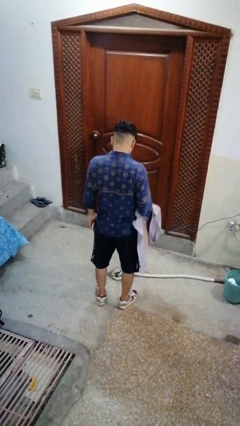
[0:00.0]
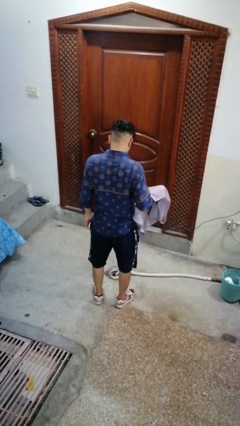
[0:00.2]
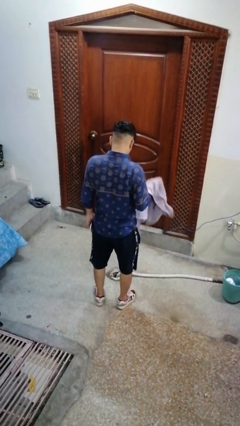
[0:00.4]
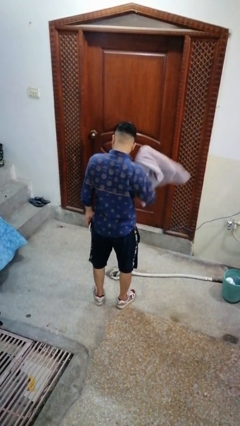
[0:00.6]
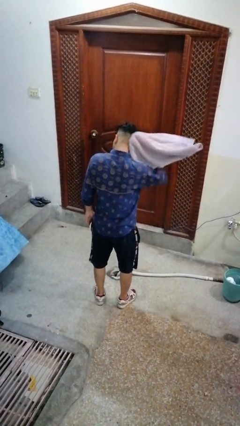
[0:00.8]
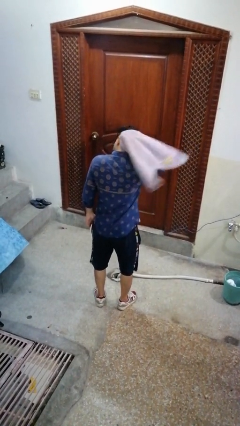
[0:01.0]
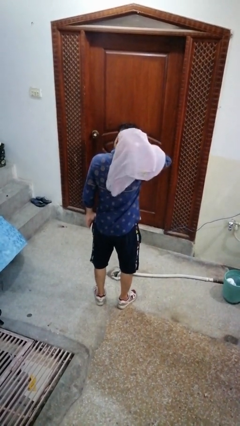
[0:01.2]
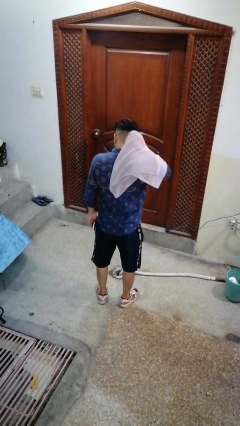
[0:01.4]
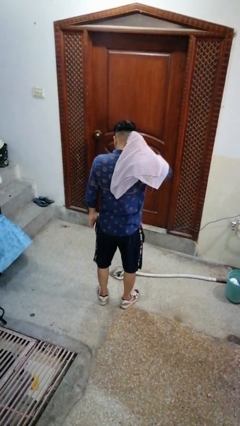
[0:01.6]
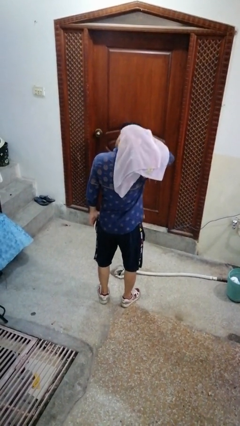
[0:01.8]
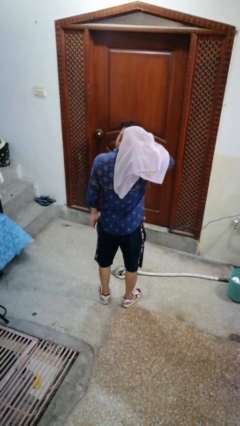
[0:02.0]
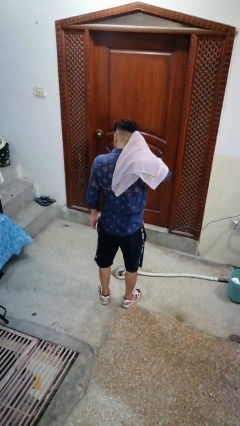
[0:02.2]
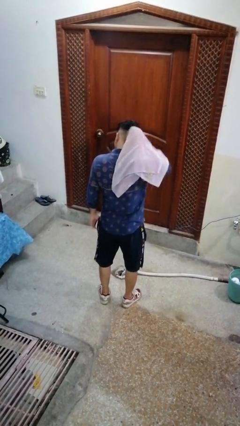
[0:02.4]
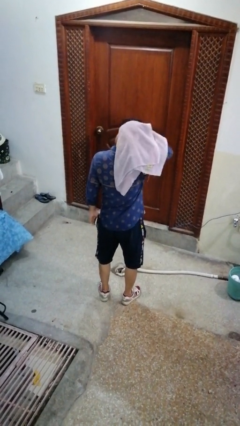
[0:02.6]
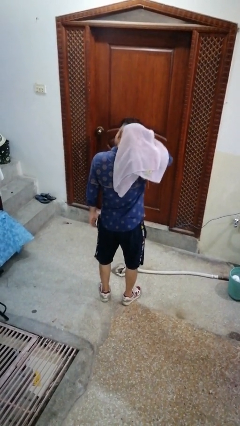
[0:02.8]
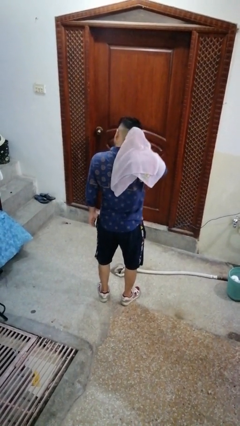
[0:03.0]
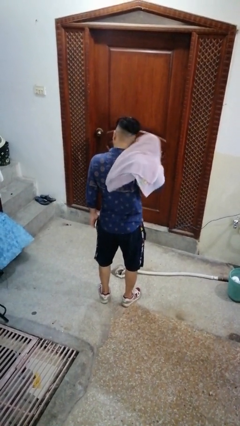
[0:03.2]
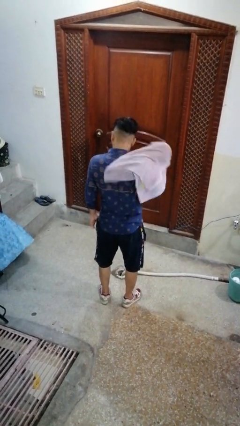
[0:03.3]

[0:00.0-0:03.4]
person dries hair with towel

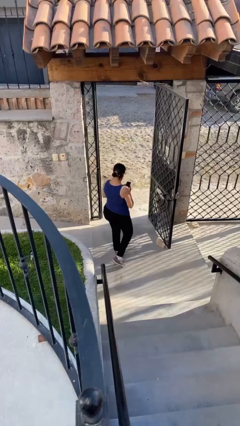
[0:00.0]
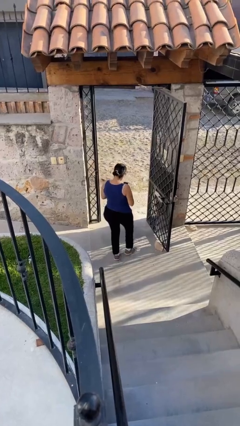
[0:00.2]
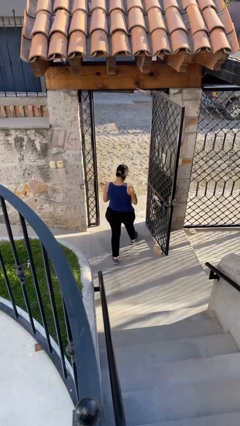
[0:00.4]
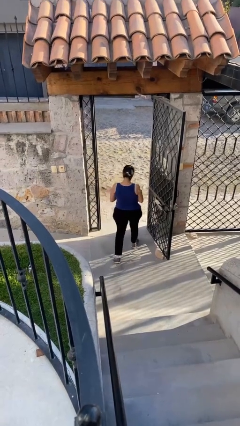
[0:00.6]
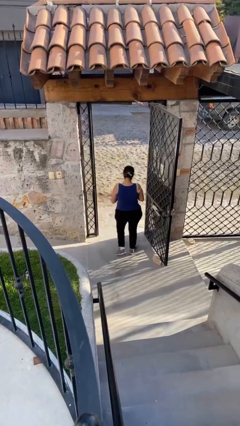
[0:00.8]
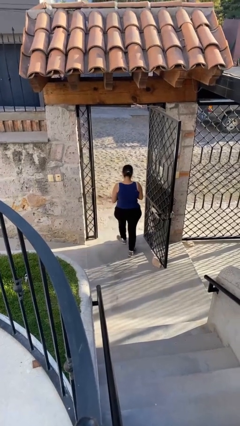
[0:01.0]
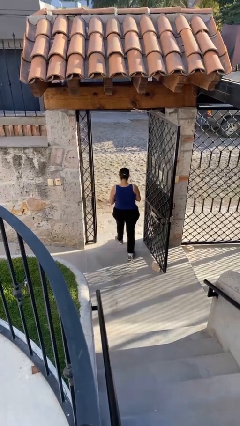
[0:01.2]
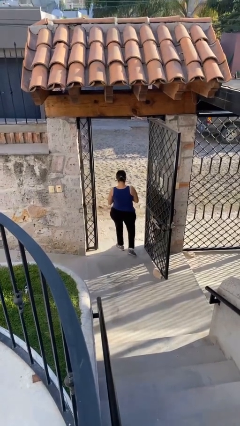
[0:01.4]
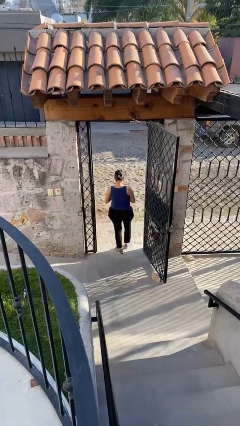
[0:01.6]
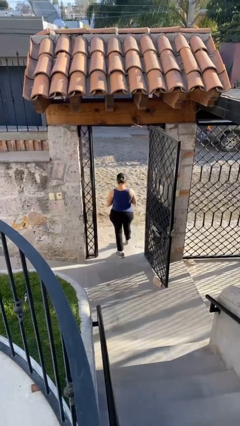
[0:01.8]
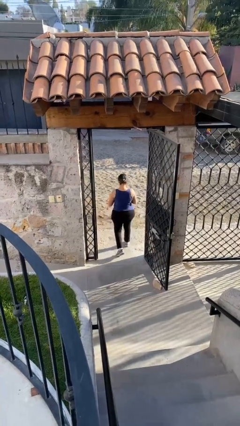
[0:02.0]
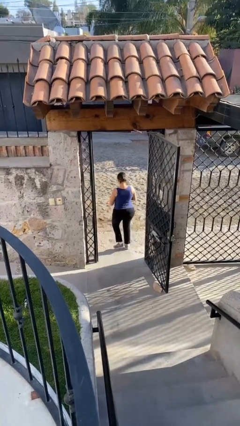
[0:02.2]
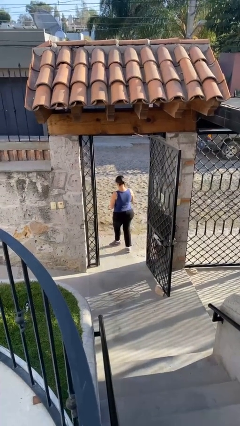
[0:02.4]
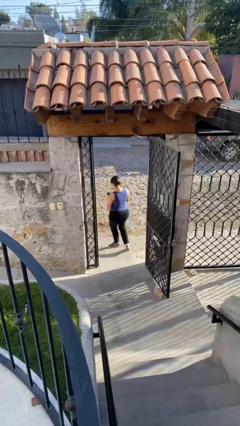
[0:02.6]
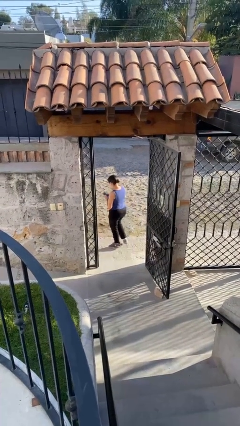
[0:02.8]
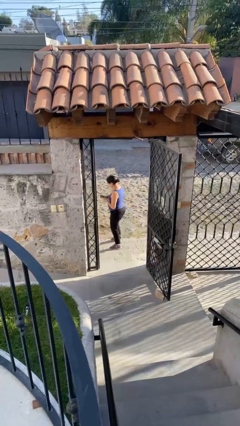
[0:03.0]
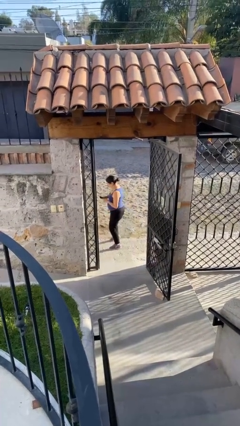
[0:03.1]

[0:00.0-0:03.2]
person exits scene through structure

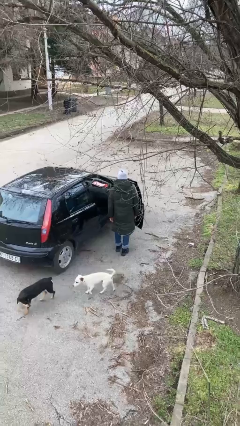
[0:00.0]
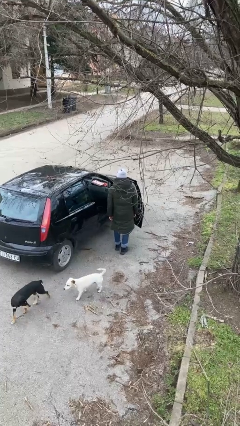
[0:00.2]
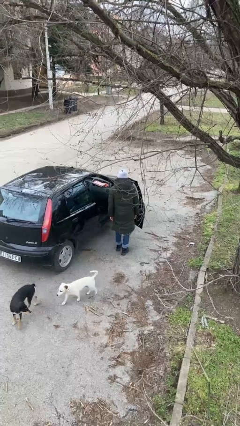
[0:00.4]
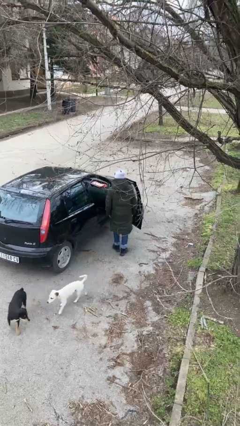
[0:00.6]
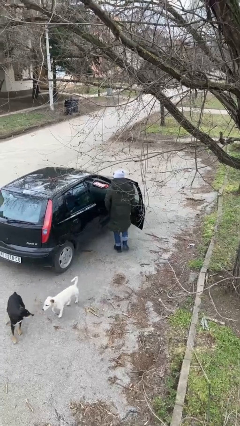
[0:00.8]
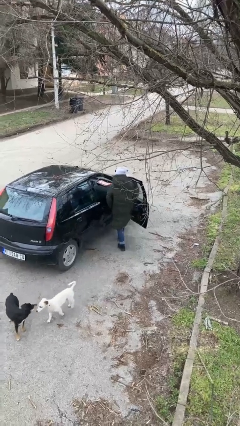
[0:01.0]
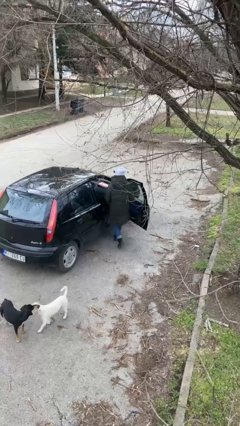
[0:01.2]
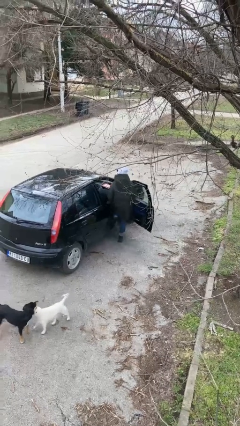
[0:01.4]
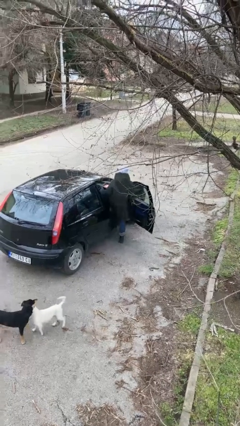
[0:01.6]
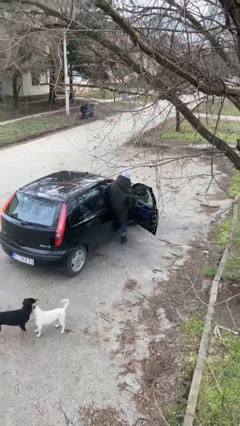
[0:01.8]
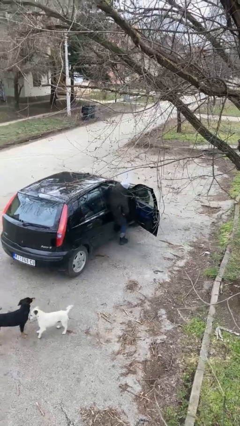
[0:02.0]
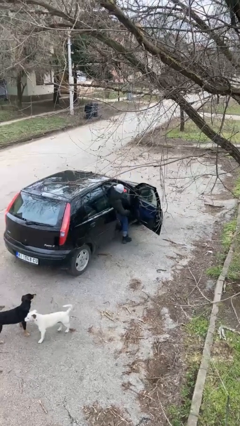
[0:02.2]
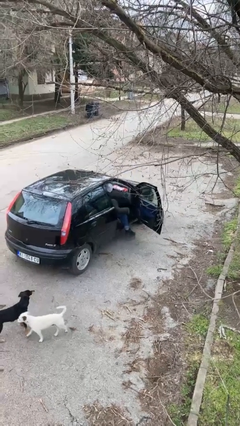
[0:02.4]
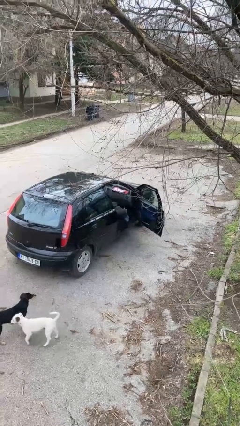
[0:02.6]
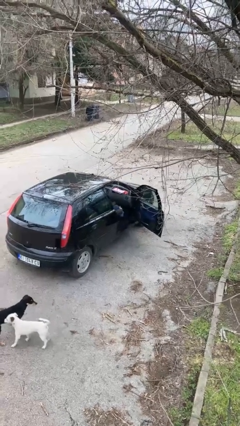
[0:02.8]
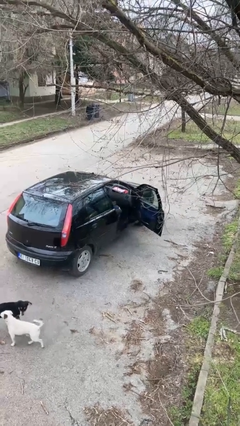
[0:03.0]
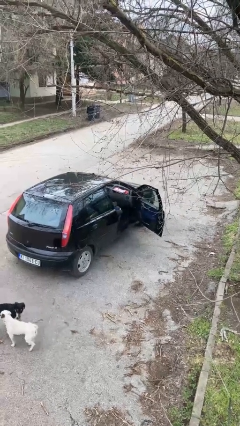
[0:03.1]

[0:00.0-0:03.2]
person enters car

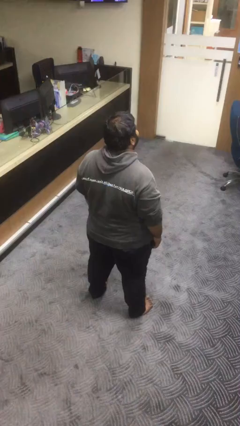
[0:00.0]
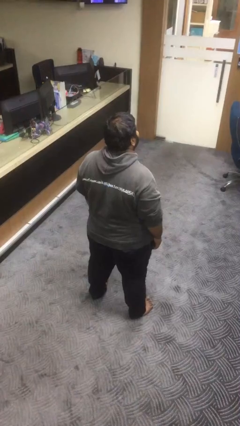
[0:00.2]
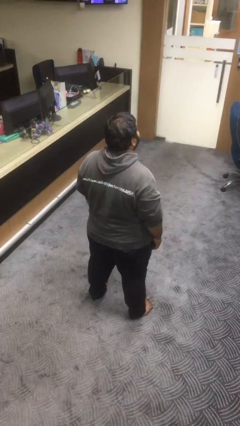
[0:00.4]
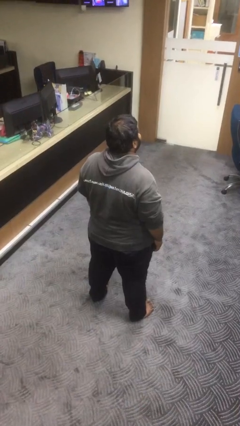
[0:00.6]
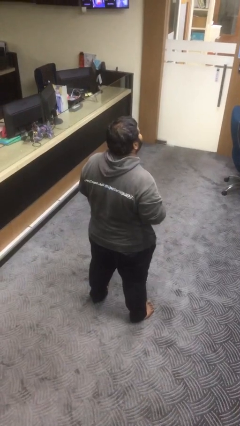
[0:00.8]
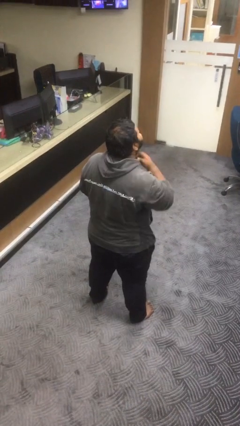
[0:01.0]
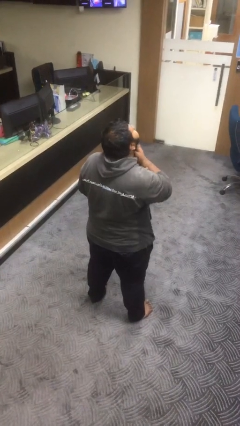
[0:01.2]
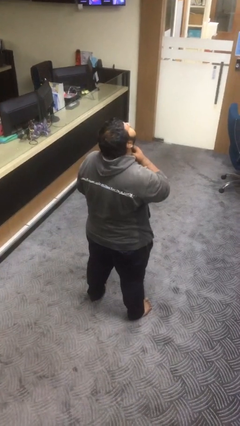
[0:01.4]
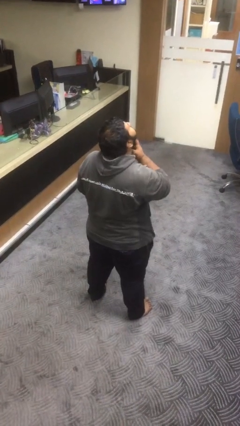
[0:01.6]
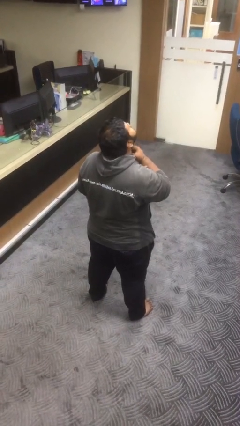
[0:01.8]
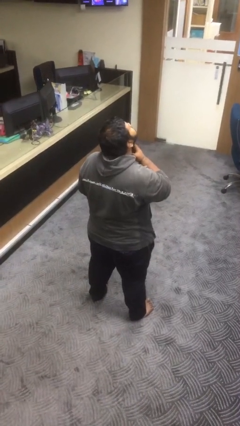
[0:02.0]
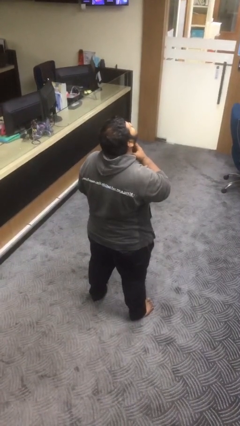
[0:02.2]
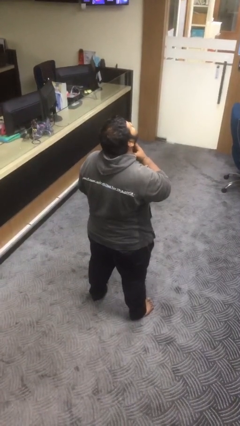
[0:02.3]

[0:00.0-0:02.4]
person rubs neck

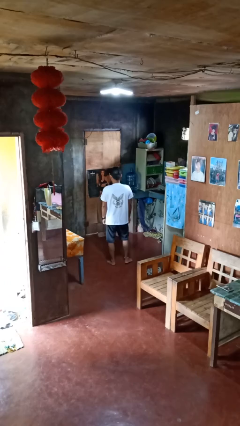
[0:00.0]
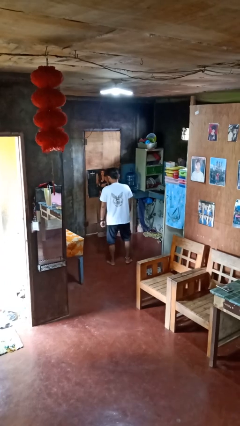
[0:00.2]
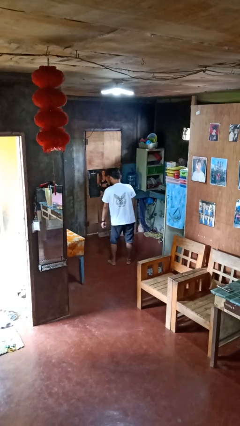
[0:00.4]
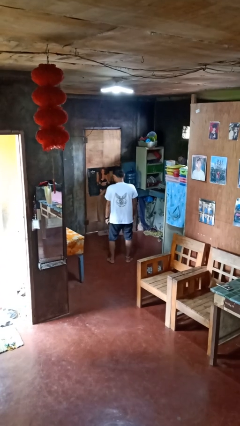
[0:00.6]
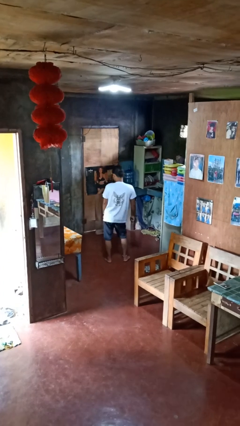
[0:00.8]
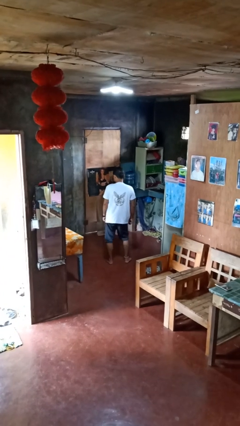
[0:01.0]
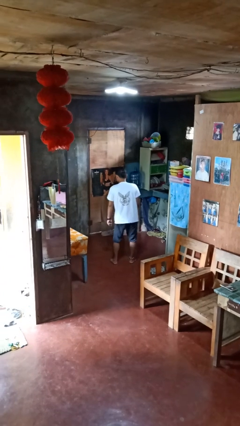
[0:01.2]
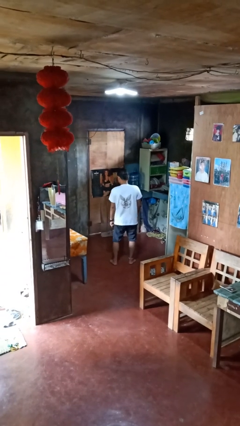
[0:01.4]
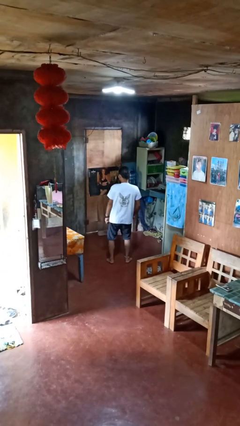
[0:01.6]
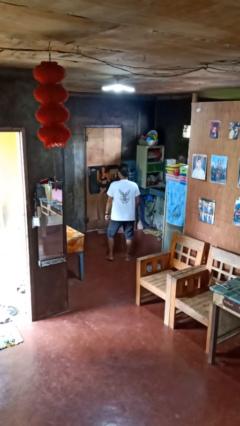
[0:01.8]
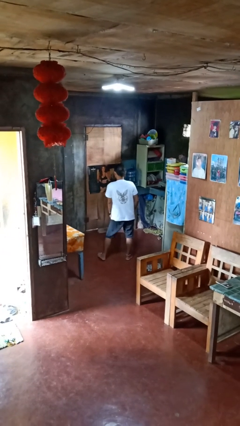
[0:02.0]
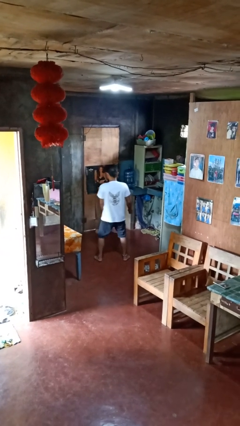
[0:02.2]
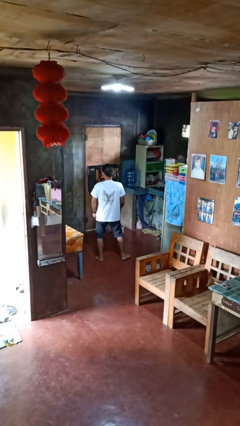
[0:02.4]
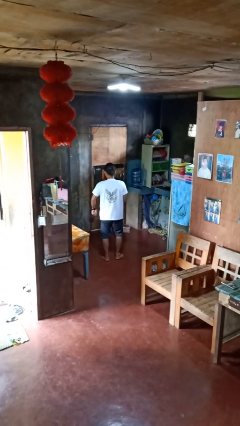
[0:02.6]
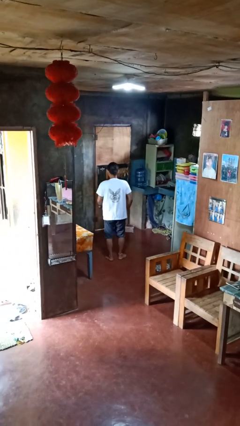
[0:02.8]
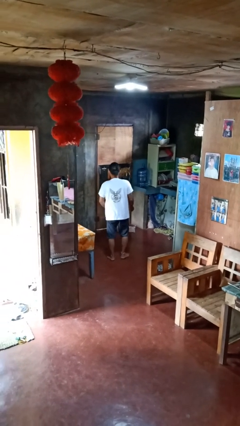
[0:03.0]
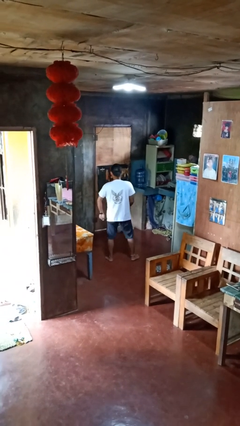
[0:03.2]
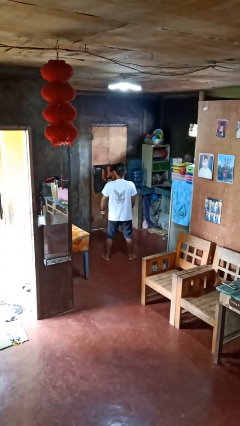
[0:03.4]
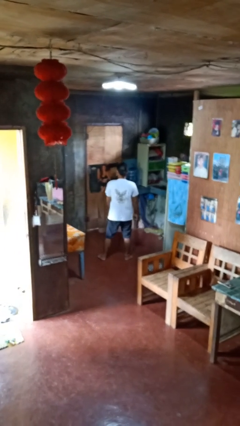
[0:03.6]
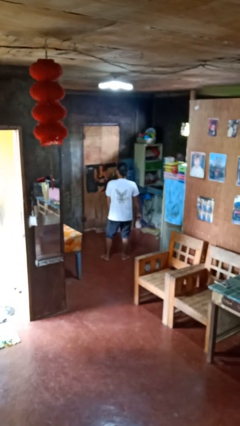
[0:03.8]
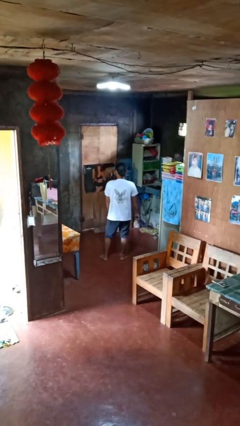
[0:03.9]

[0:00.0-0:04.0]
person dances in place

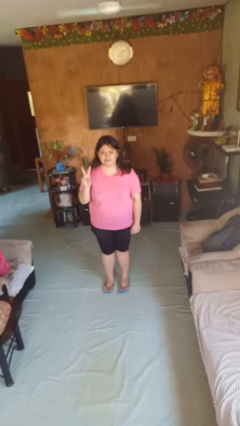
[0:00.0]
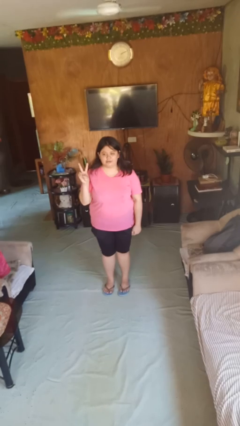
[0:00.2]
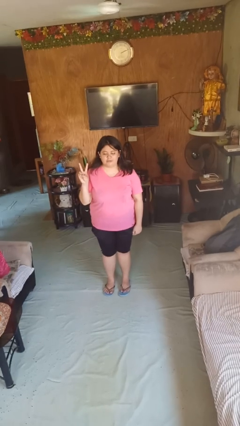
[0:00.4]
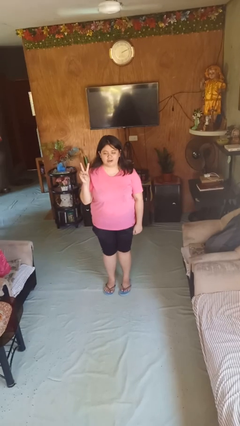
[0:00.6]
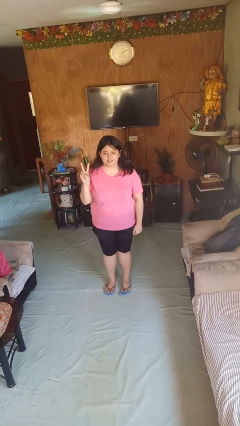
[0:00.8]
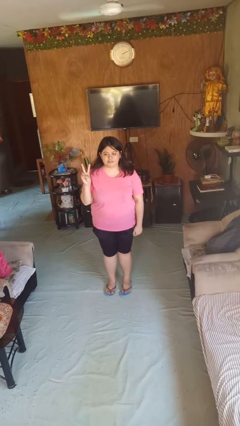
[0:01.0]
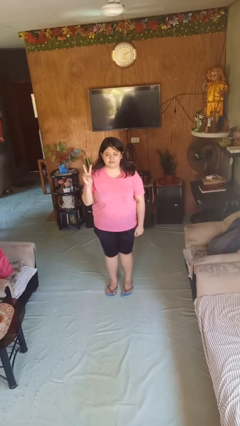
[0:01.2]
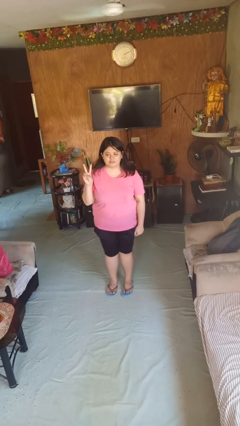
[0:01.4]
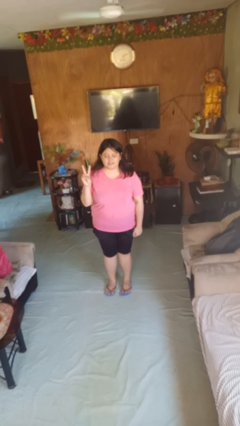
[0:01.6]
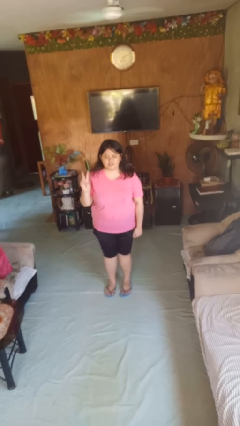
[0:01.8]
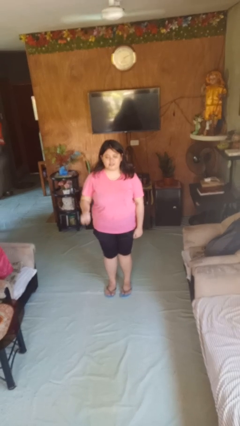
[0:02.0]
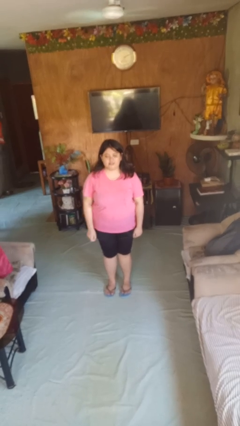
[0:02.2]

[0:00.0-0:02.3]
person gestures peace
